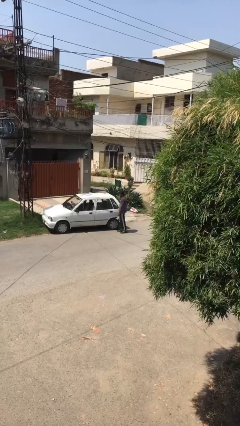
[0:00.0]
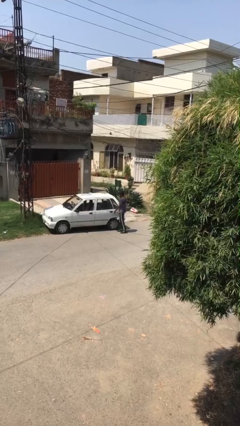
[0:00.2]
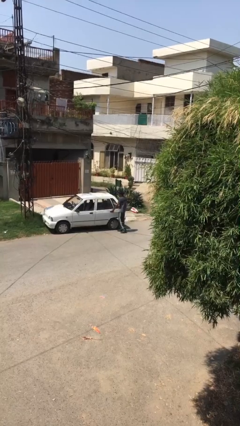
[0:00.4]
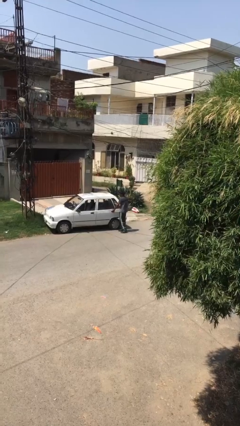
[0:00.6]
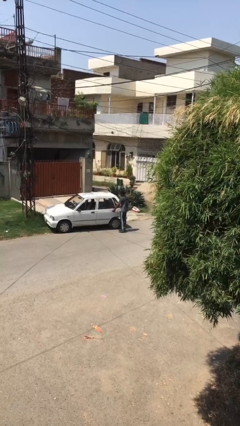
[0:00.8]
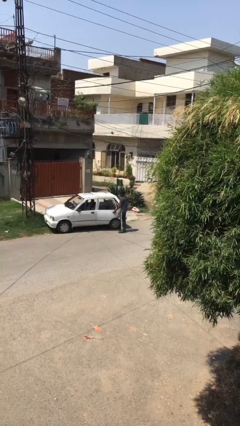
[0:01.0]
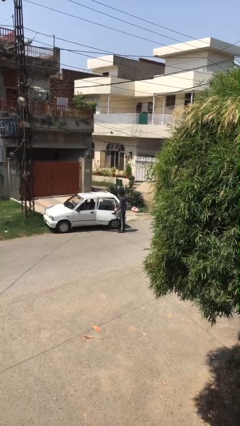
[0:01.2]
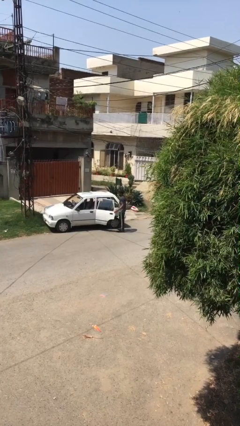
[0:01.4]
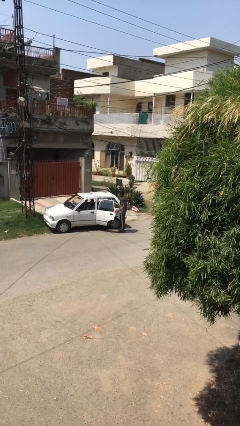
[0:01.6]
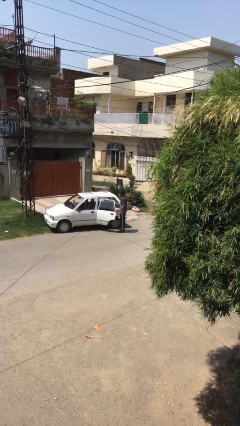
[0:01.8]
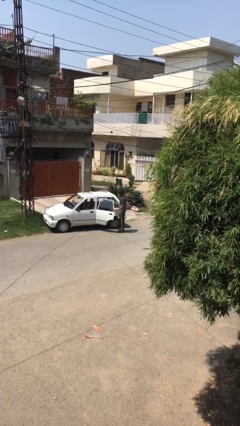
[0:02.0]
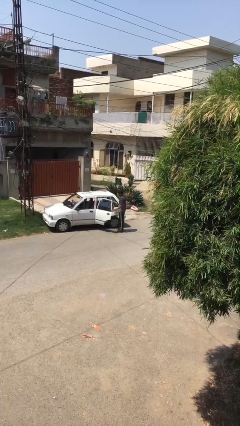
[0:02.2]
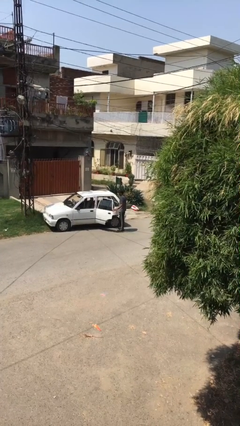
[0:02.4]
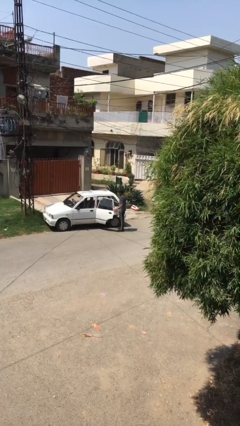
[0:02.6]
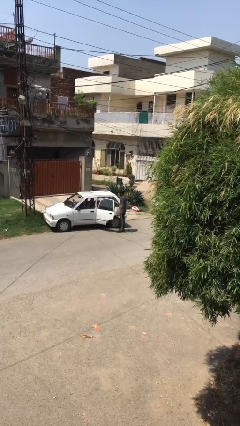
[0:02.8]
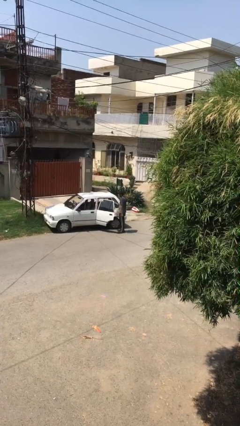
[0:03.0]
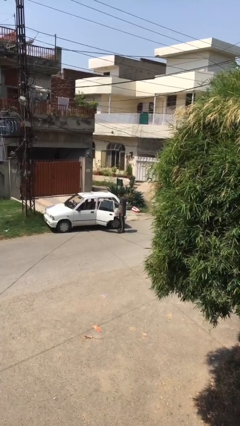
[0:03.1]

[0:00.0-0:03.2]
person opens car door

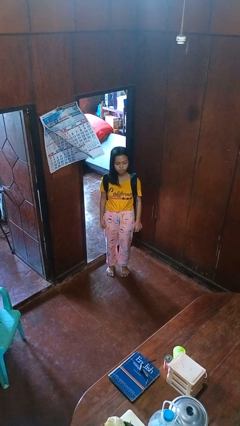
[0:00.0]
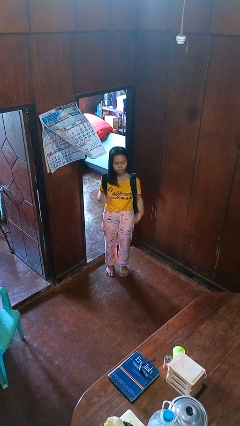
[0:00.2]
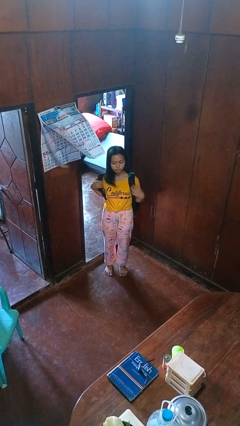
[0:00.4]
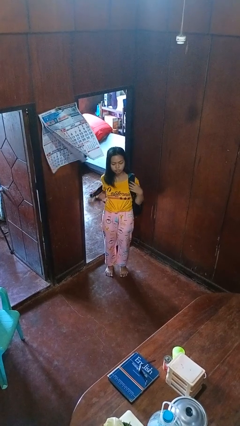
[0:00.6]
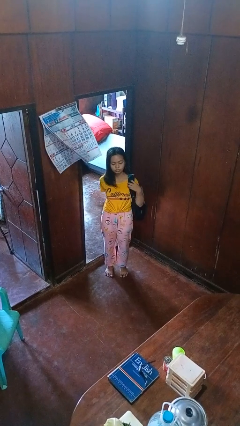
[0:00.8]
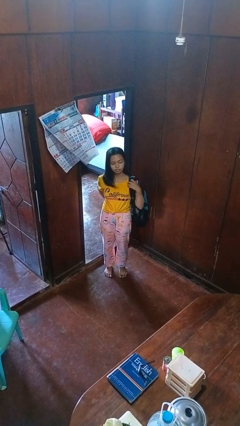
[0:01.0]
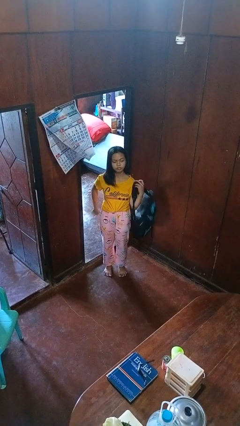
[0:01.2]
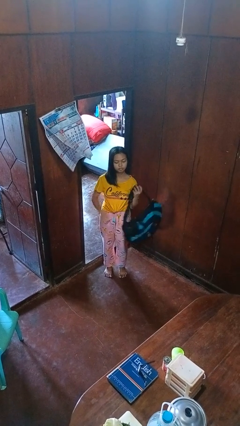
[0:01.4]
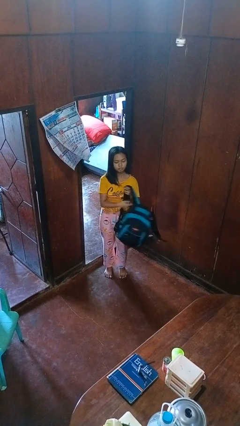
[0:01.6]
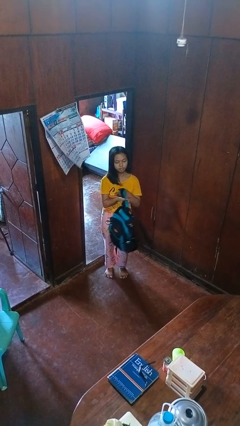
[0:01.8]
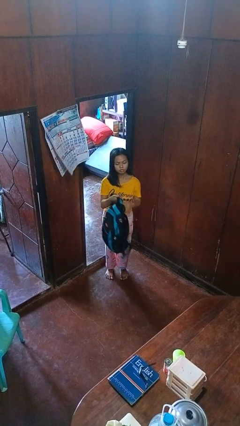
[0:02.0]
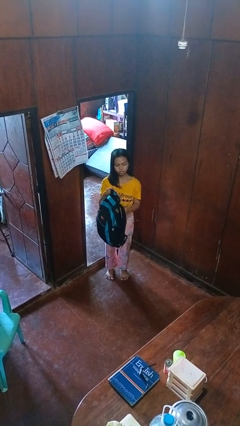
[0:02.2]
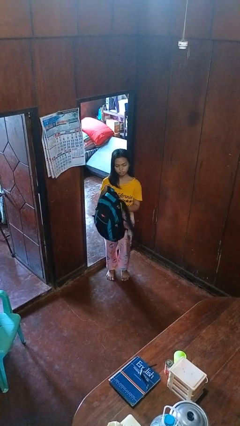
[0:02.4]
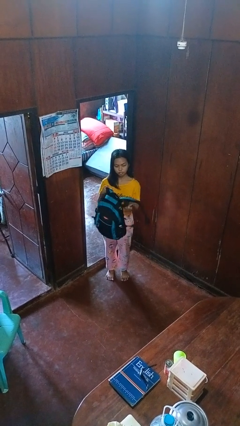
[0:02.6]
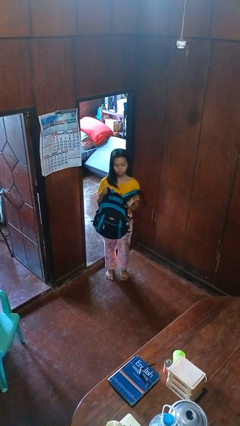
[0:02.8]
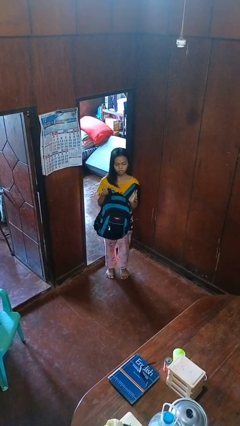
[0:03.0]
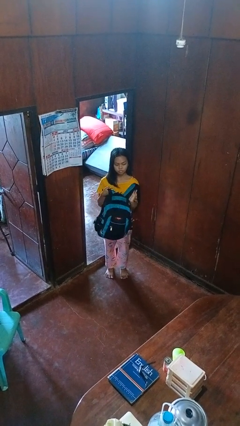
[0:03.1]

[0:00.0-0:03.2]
person takes off backpack

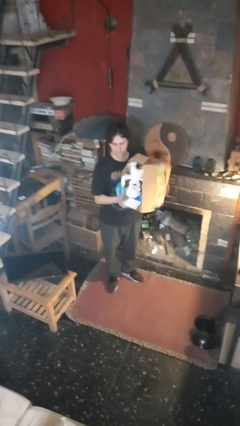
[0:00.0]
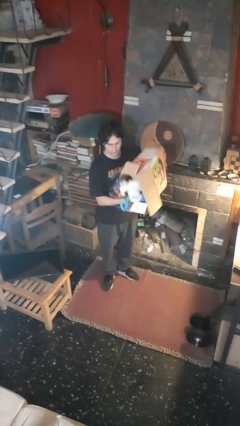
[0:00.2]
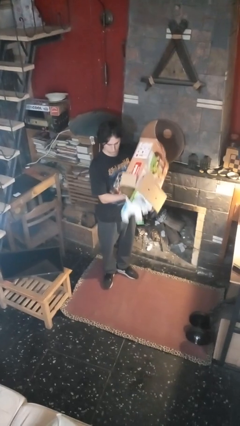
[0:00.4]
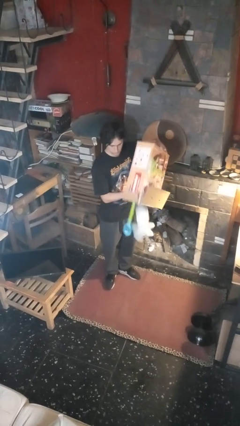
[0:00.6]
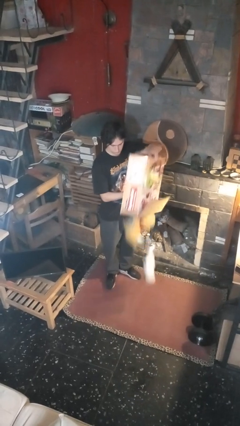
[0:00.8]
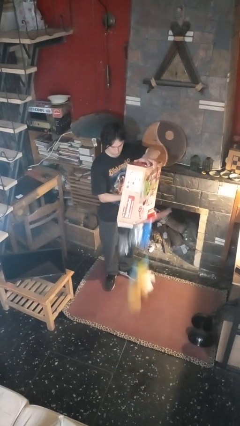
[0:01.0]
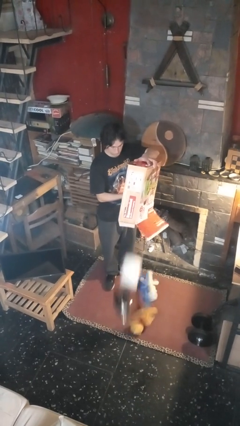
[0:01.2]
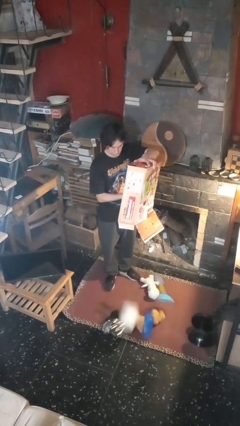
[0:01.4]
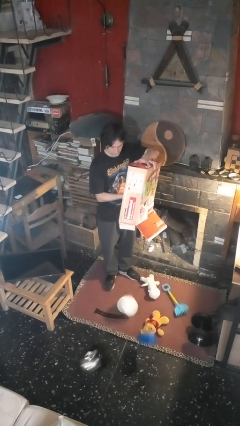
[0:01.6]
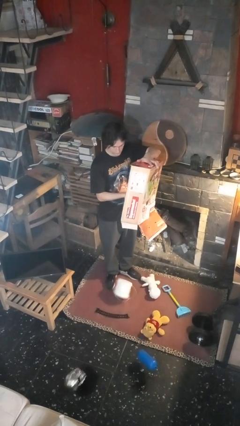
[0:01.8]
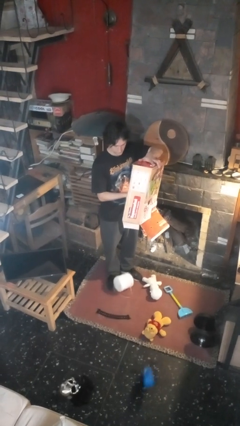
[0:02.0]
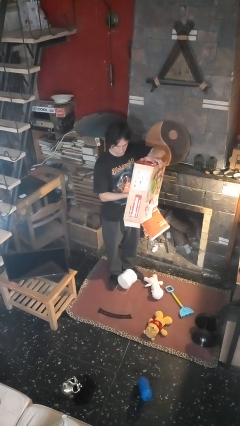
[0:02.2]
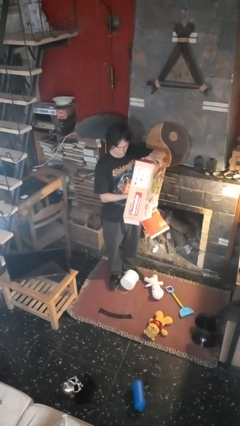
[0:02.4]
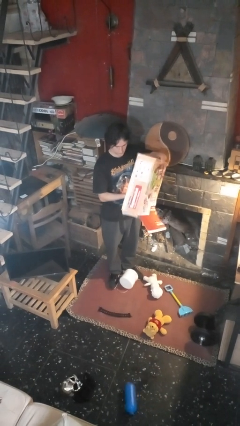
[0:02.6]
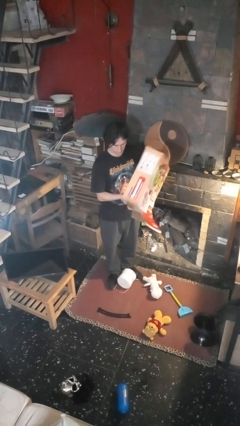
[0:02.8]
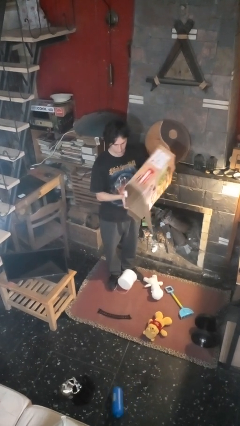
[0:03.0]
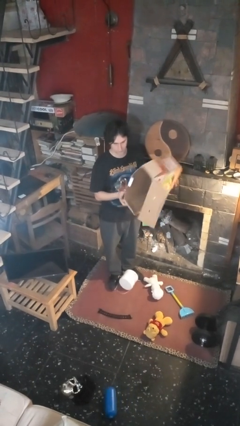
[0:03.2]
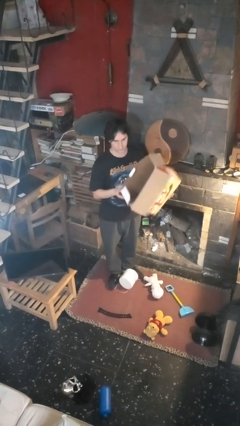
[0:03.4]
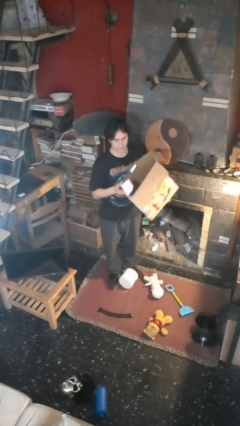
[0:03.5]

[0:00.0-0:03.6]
person unloads box onto floor

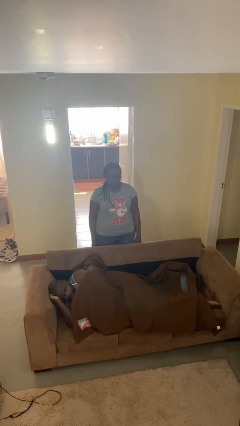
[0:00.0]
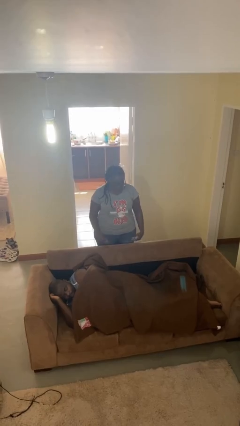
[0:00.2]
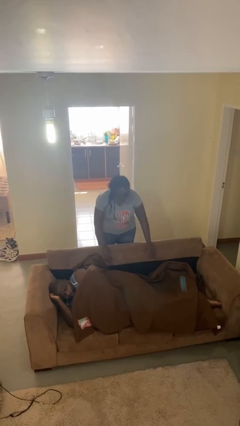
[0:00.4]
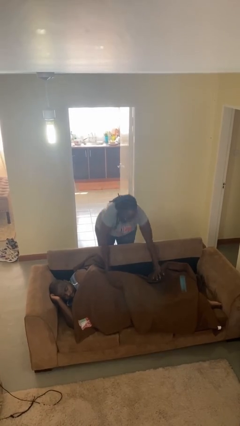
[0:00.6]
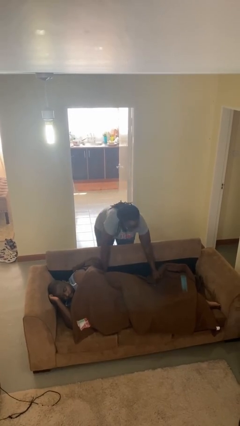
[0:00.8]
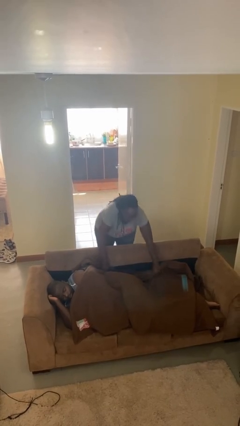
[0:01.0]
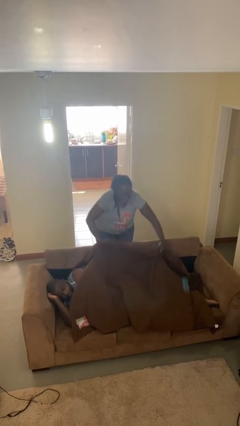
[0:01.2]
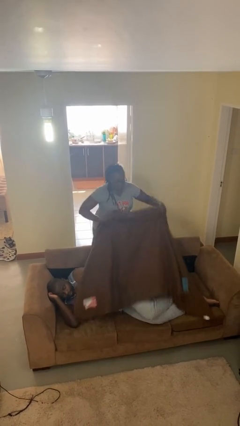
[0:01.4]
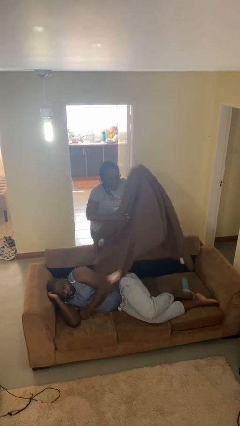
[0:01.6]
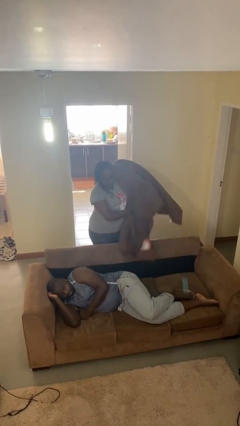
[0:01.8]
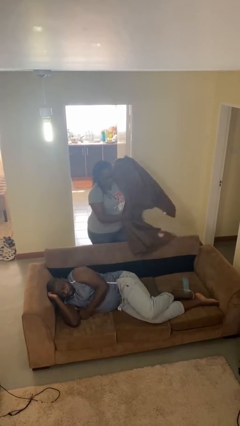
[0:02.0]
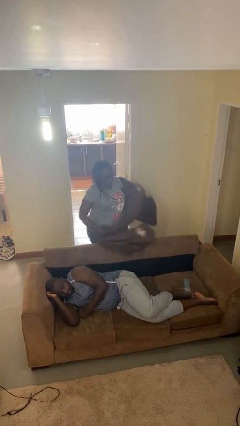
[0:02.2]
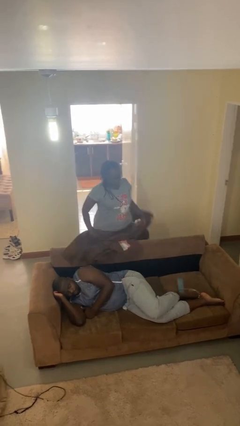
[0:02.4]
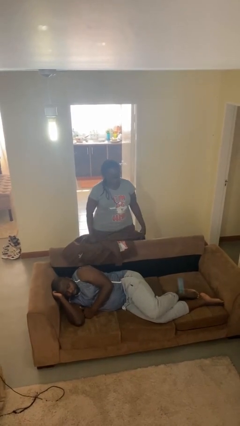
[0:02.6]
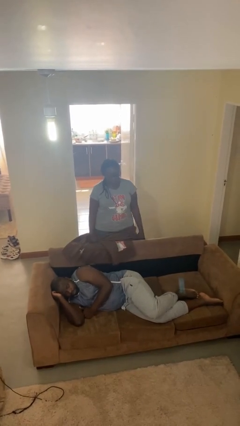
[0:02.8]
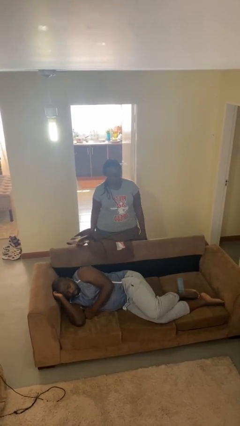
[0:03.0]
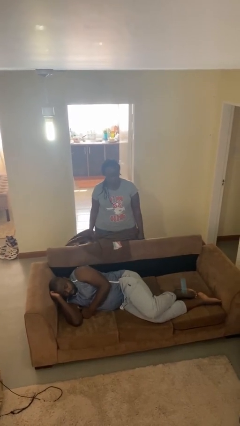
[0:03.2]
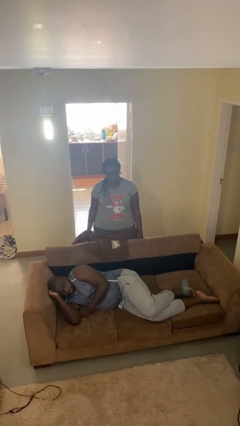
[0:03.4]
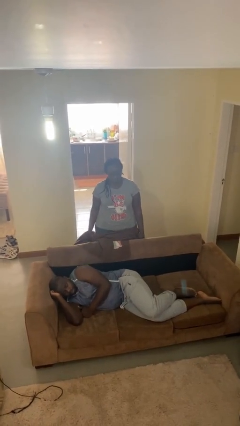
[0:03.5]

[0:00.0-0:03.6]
person uncovers friend with blanket

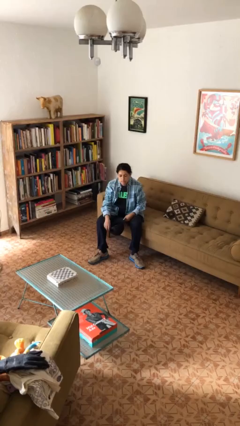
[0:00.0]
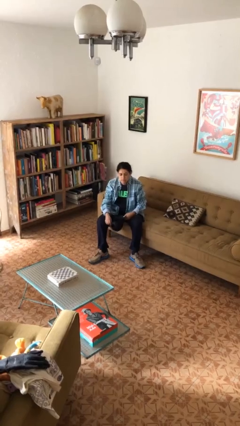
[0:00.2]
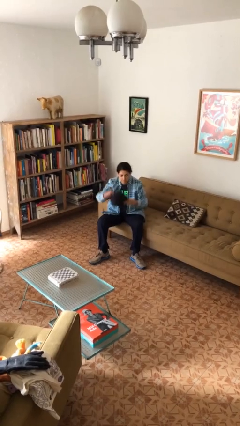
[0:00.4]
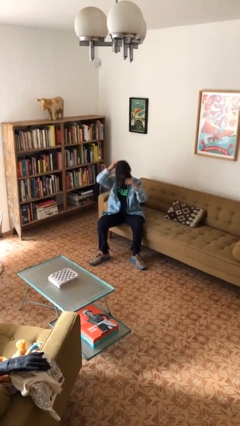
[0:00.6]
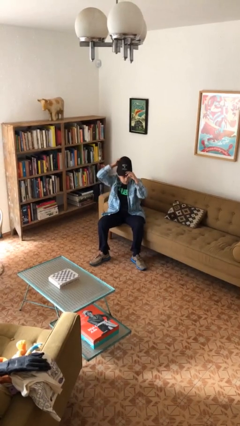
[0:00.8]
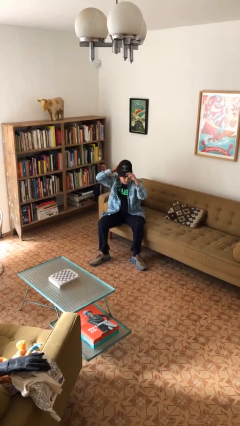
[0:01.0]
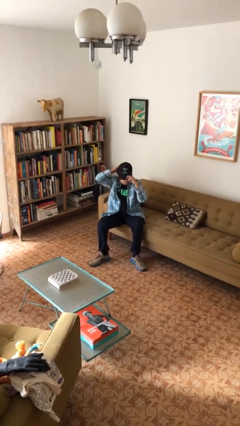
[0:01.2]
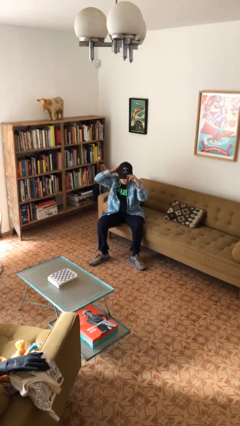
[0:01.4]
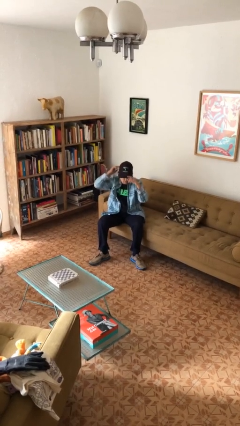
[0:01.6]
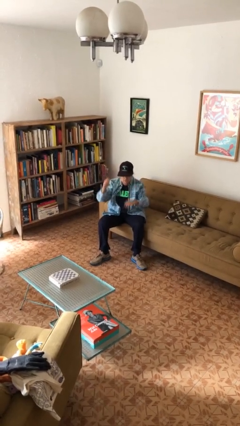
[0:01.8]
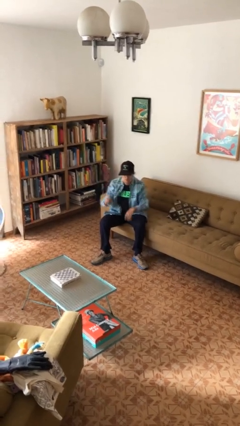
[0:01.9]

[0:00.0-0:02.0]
person puts on hat

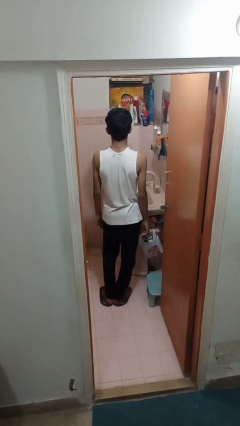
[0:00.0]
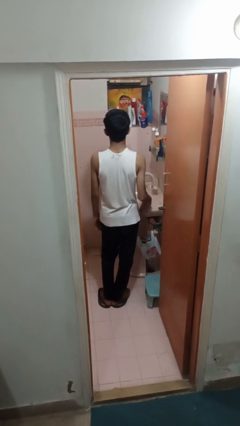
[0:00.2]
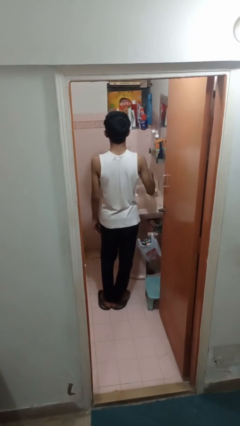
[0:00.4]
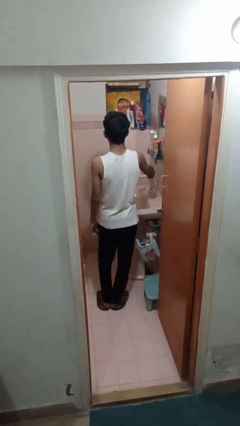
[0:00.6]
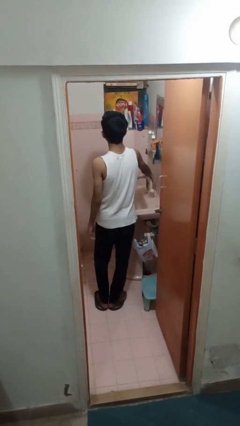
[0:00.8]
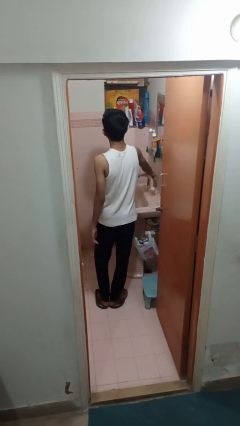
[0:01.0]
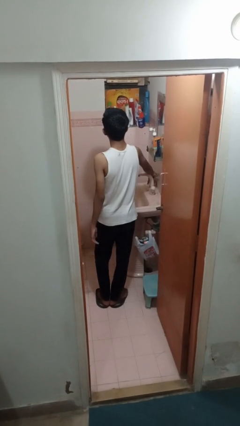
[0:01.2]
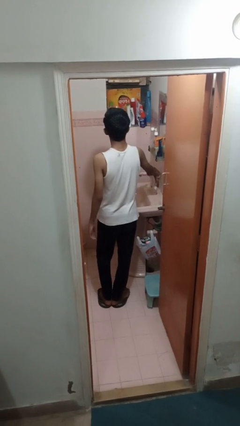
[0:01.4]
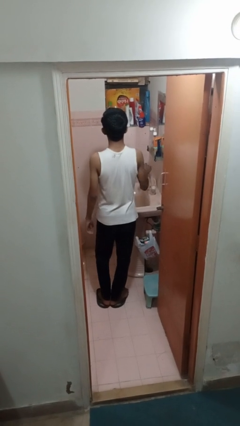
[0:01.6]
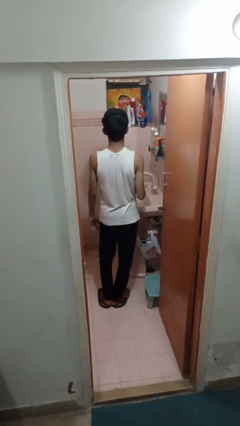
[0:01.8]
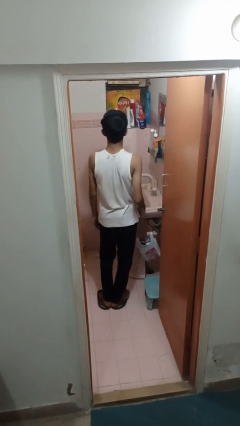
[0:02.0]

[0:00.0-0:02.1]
person turns off faucet
